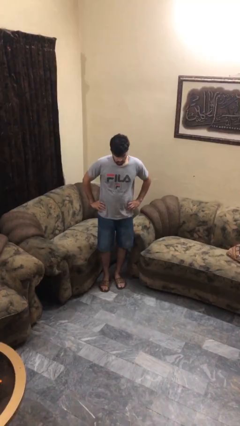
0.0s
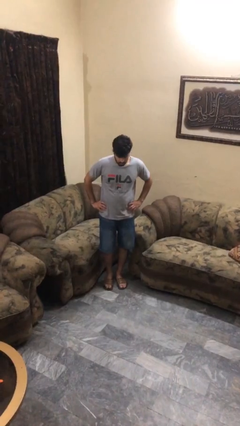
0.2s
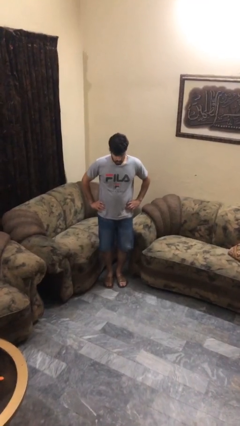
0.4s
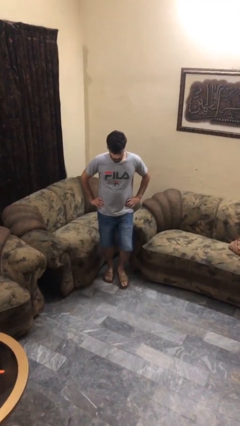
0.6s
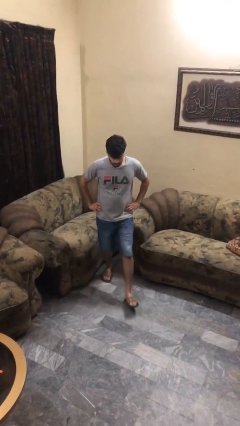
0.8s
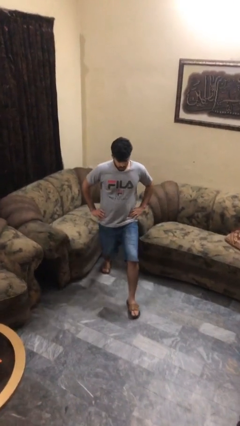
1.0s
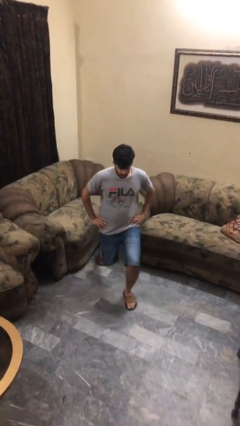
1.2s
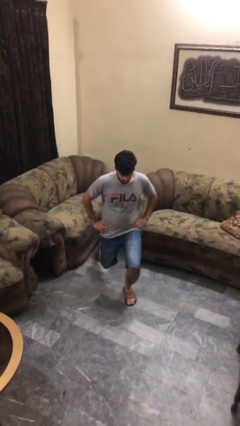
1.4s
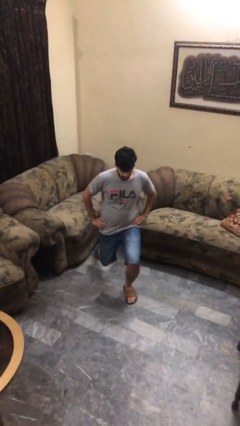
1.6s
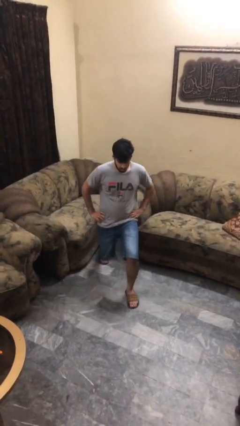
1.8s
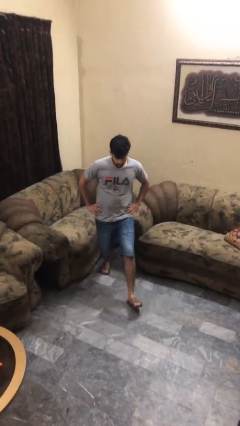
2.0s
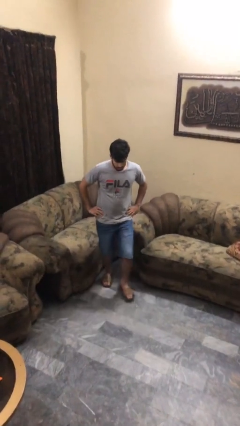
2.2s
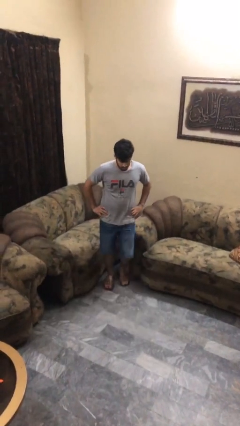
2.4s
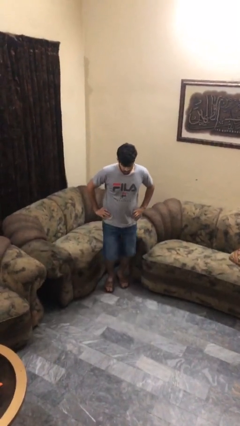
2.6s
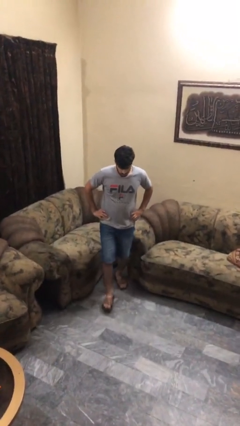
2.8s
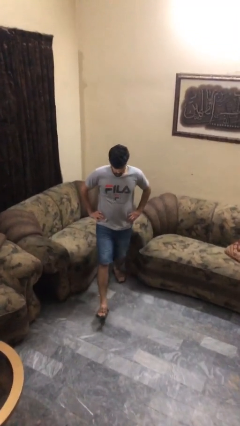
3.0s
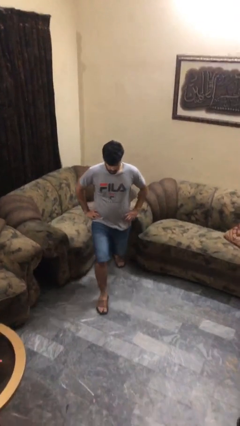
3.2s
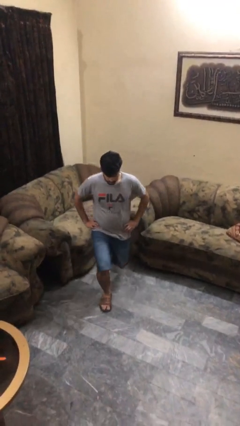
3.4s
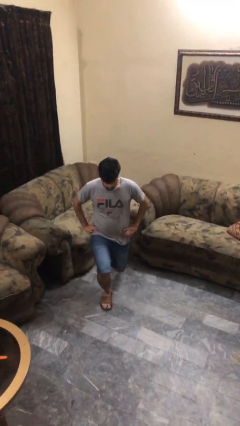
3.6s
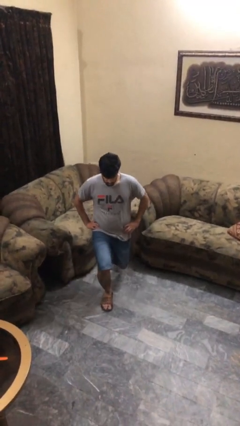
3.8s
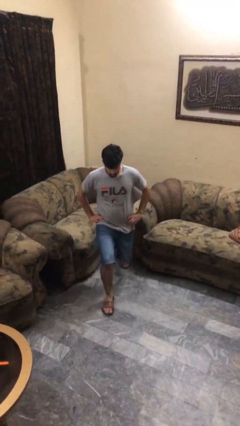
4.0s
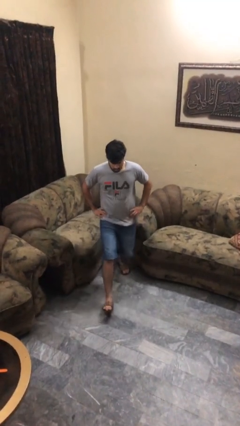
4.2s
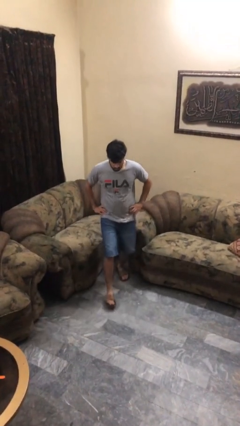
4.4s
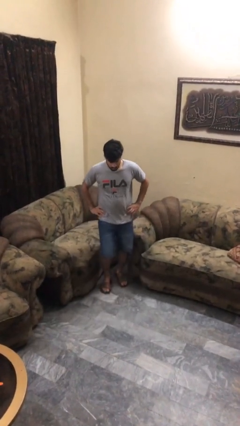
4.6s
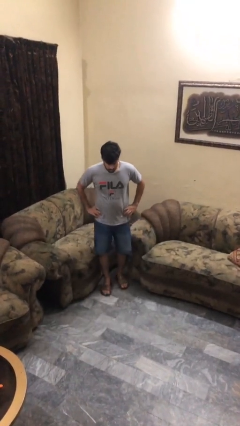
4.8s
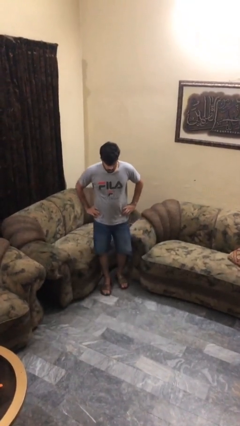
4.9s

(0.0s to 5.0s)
person exercises with lunges

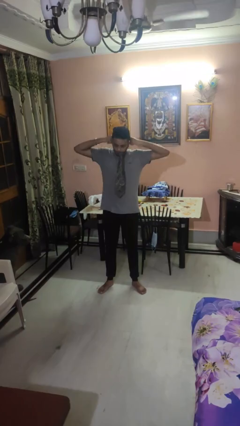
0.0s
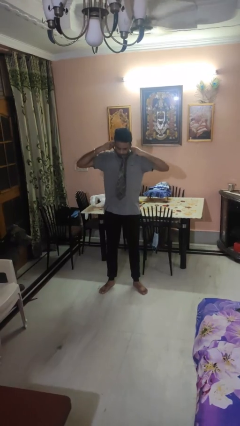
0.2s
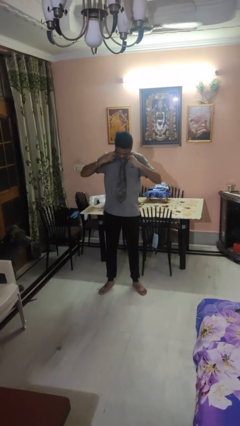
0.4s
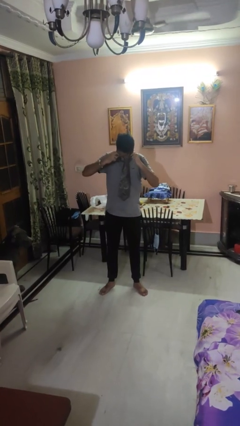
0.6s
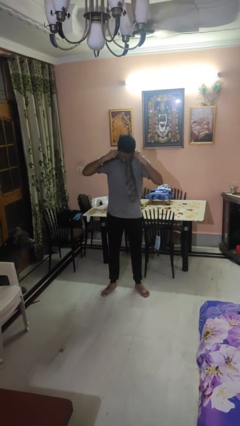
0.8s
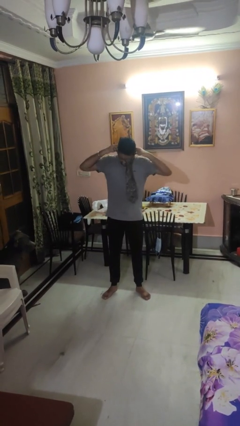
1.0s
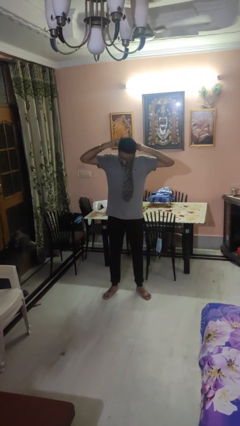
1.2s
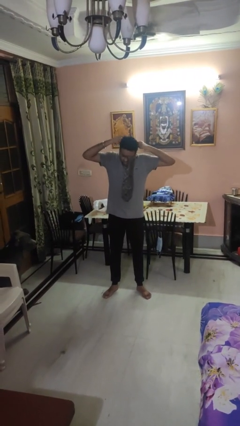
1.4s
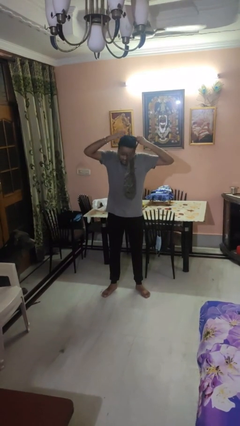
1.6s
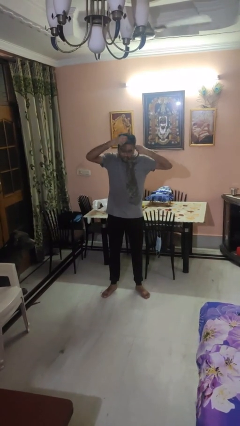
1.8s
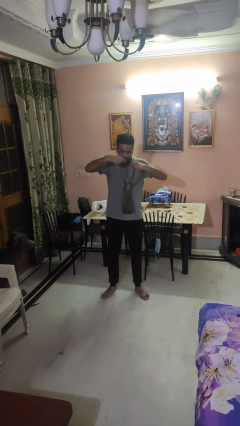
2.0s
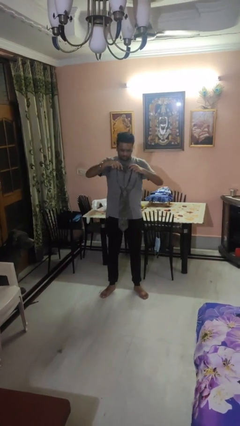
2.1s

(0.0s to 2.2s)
person takes off necktie

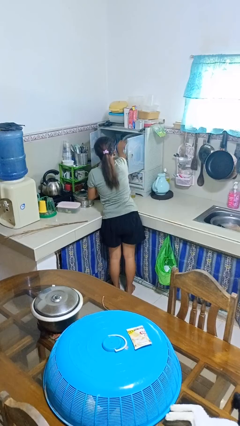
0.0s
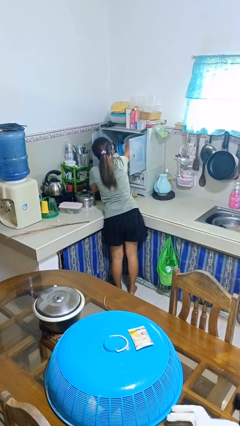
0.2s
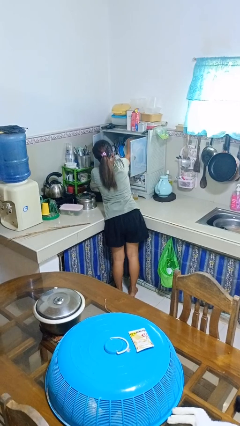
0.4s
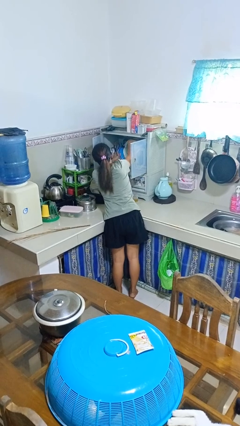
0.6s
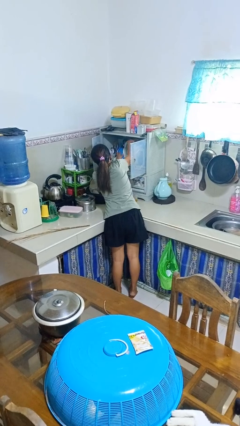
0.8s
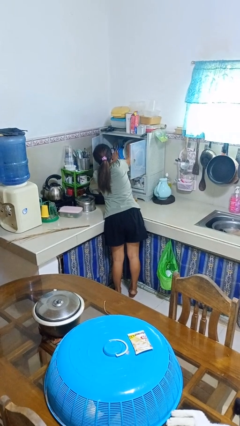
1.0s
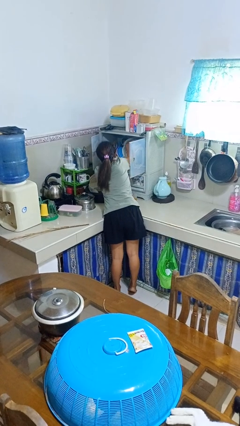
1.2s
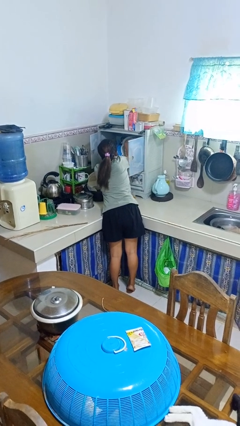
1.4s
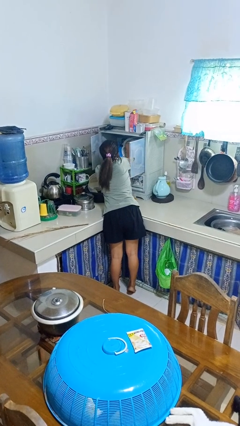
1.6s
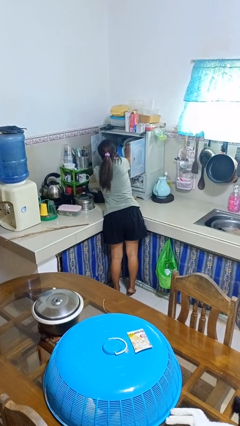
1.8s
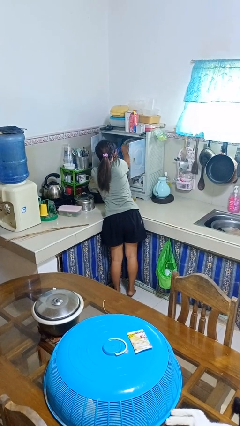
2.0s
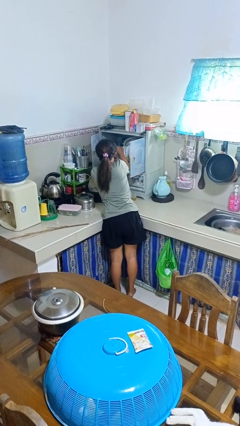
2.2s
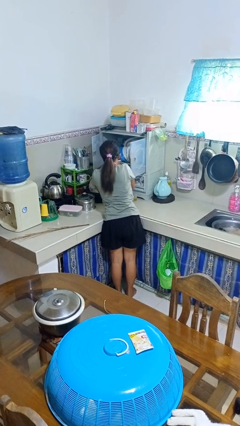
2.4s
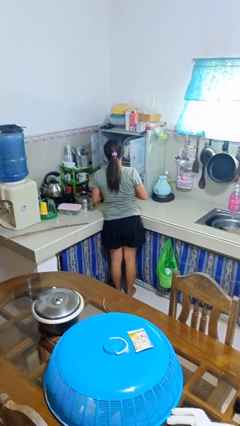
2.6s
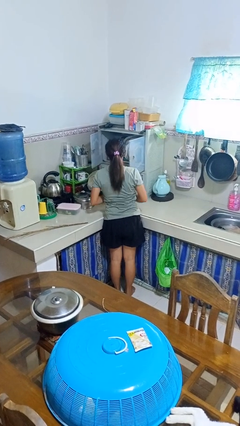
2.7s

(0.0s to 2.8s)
person searches in kitchen drawer

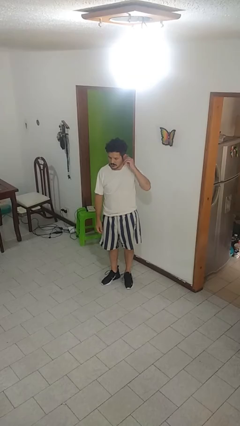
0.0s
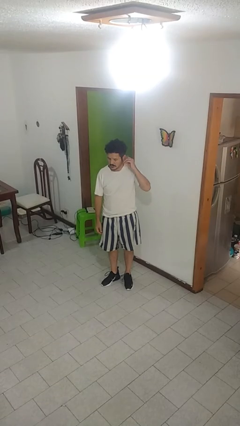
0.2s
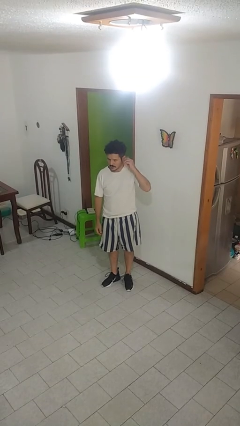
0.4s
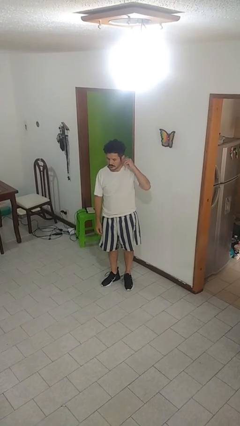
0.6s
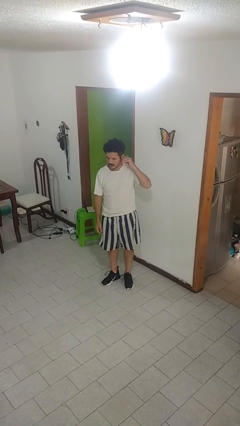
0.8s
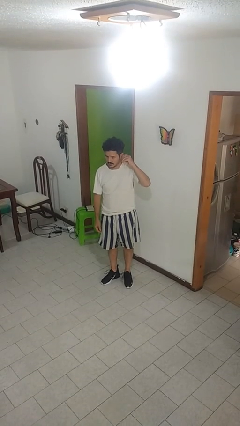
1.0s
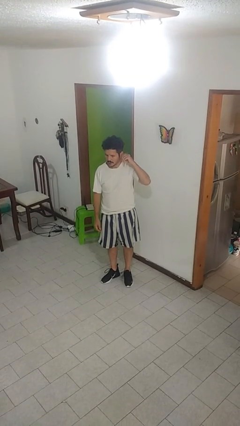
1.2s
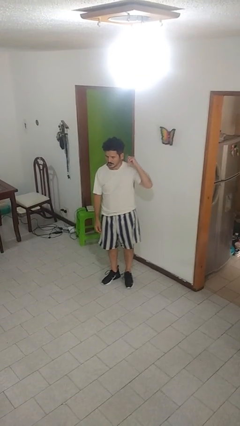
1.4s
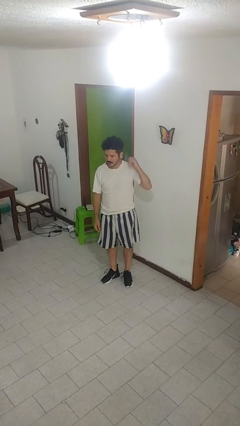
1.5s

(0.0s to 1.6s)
person touches earlobe

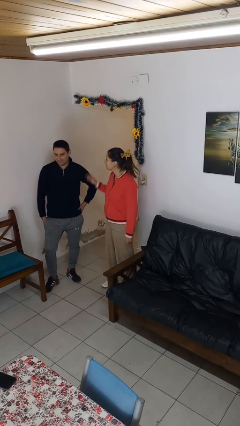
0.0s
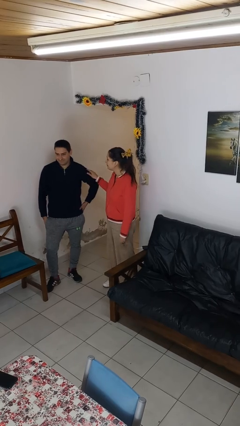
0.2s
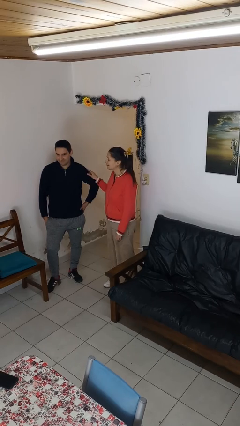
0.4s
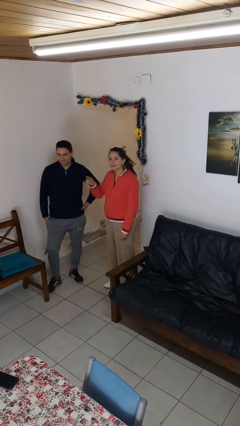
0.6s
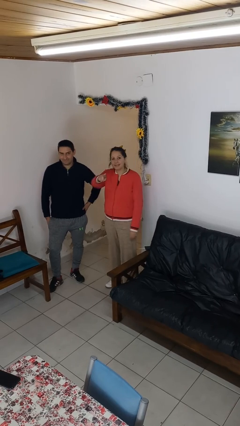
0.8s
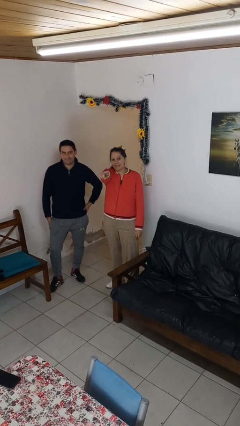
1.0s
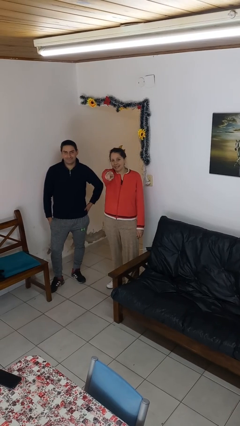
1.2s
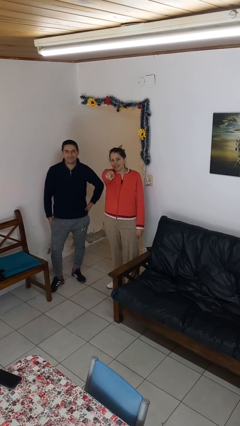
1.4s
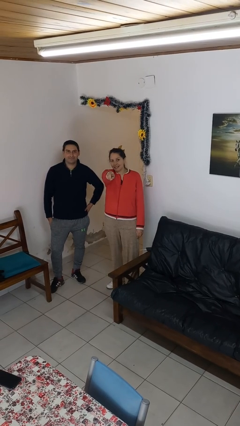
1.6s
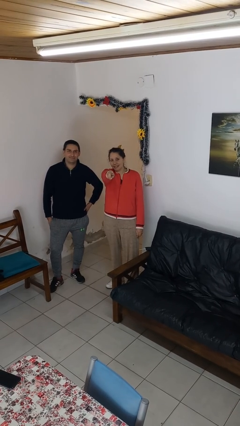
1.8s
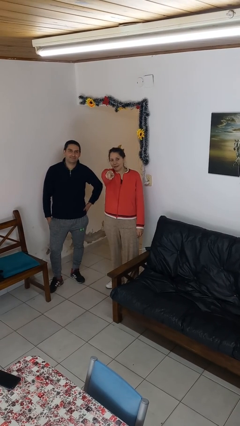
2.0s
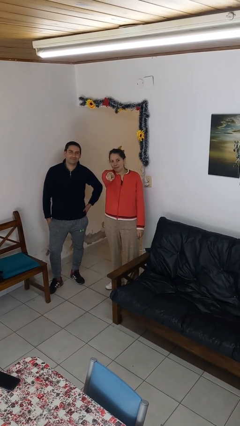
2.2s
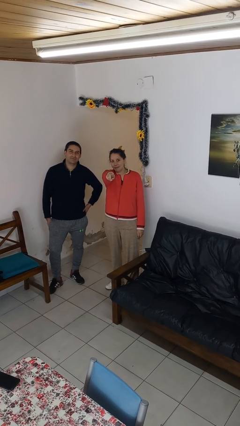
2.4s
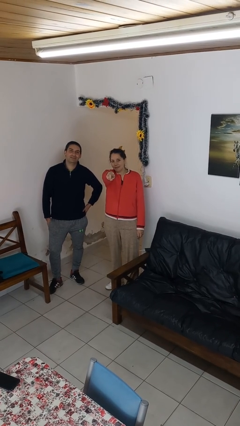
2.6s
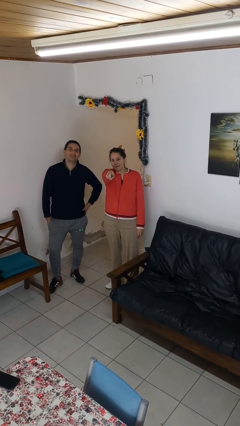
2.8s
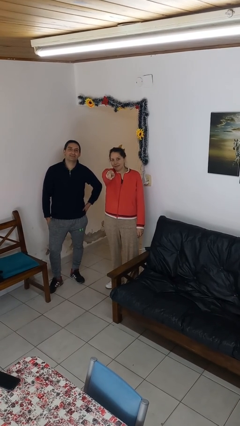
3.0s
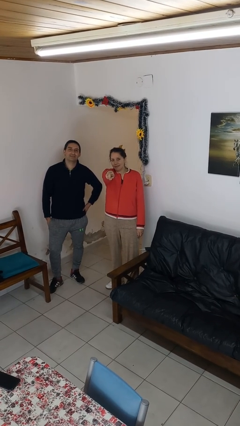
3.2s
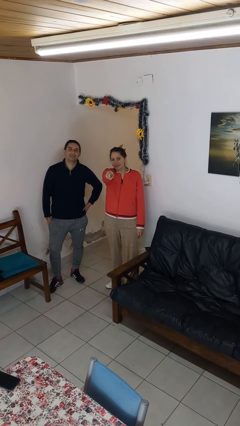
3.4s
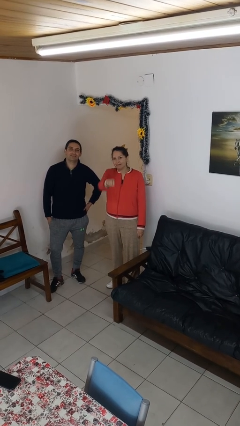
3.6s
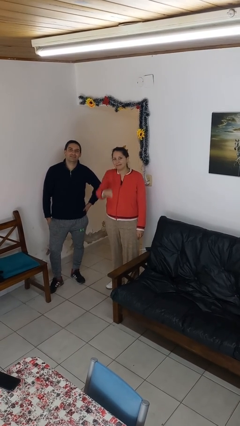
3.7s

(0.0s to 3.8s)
person points at person

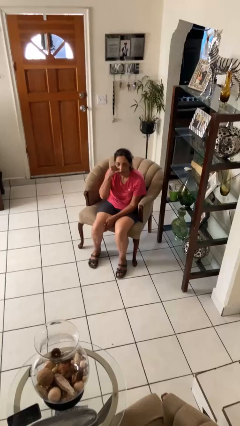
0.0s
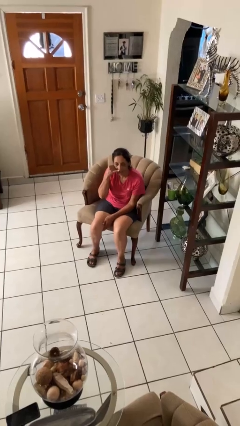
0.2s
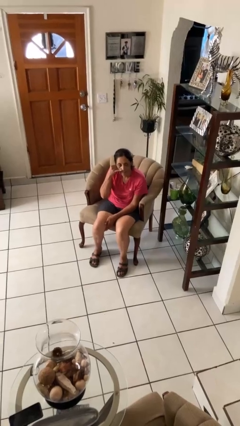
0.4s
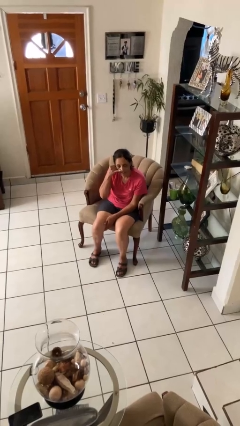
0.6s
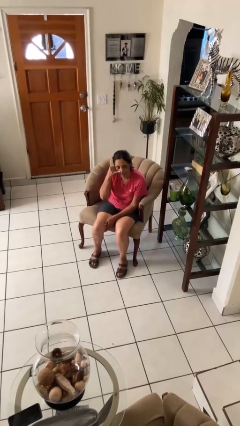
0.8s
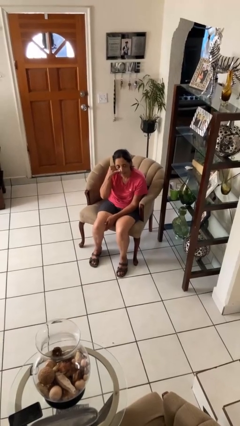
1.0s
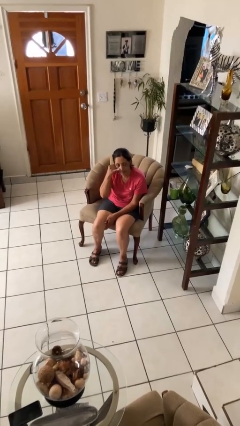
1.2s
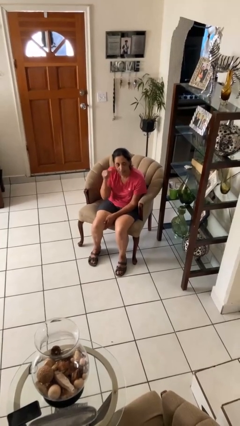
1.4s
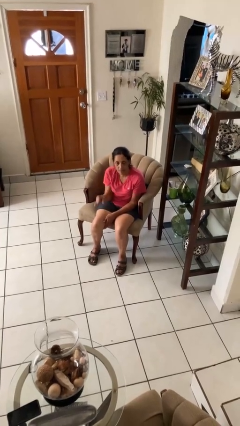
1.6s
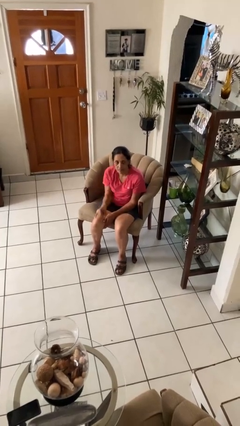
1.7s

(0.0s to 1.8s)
person gestures call me

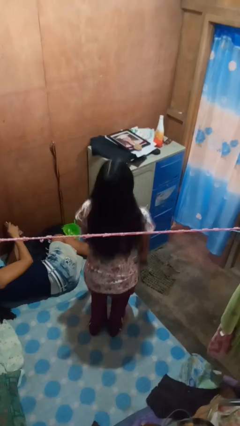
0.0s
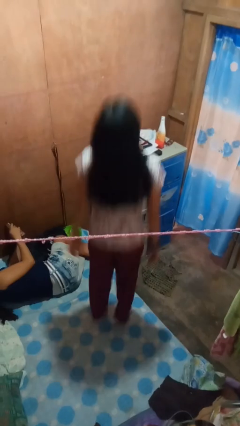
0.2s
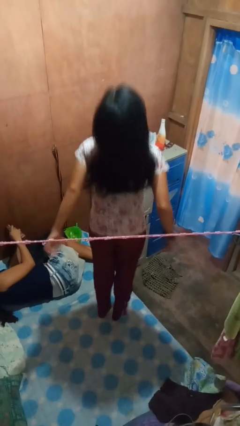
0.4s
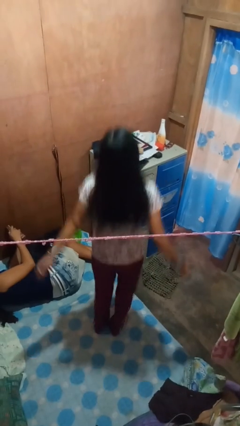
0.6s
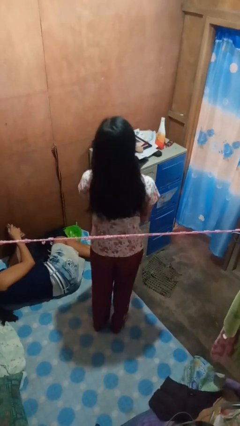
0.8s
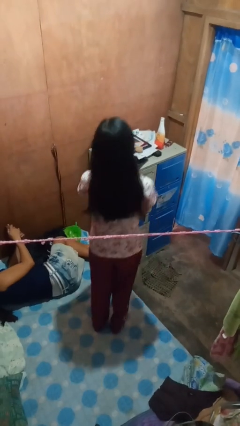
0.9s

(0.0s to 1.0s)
person jumps on bed
